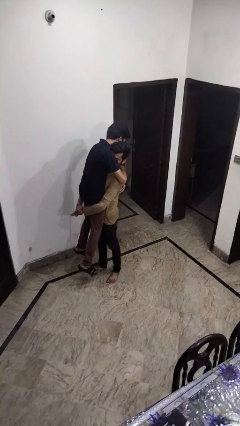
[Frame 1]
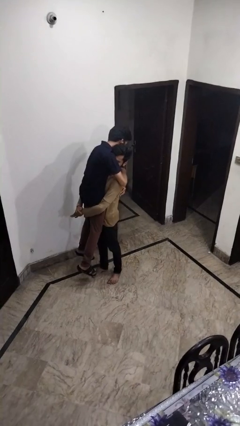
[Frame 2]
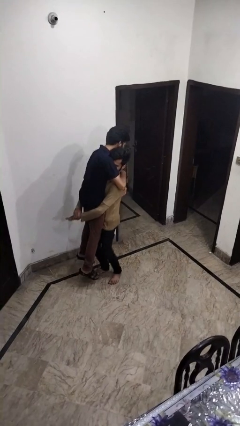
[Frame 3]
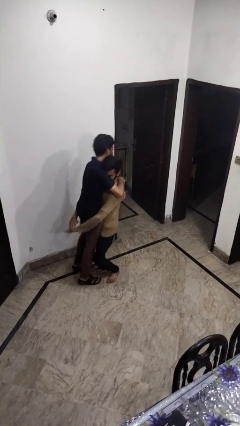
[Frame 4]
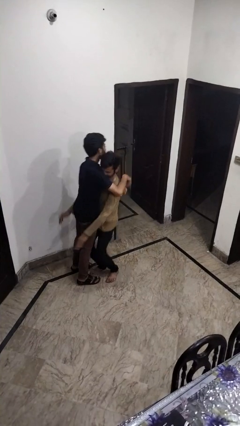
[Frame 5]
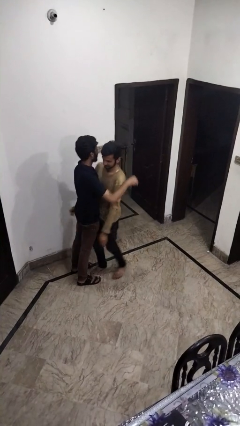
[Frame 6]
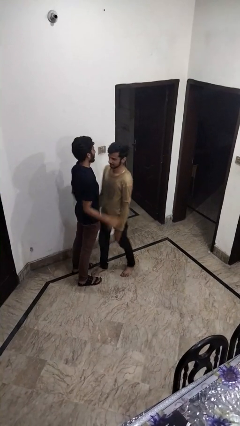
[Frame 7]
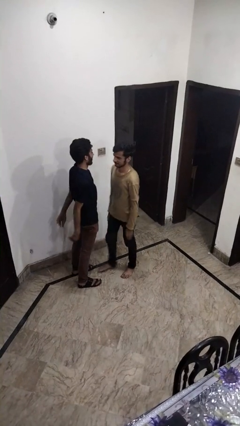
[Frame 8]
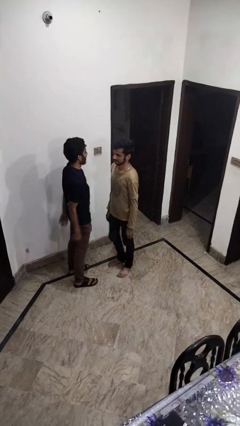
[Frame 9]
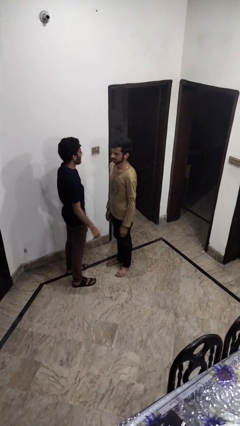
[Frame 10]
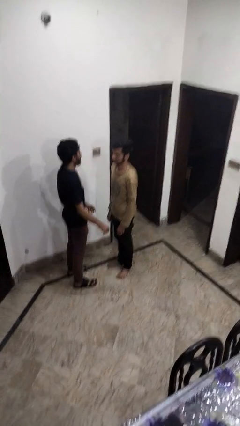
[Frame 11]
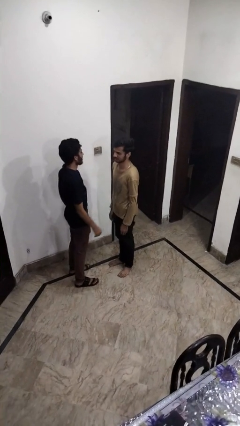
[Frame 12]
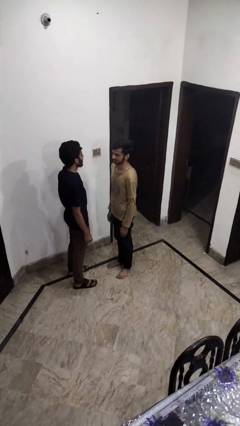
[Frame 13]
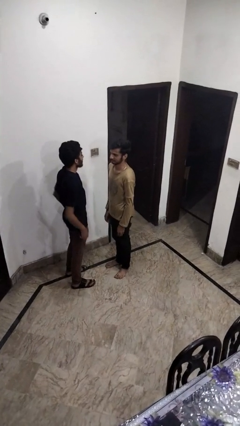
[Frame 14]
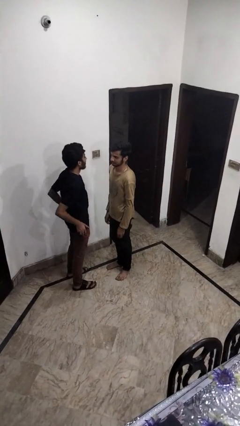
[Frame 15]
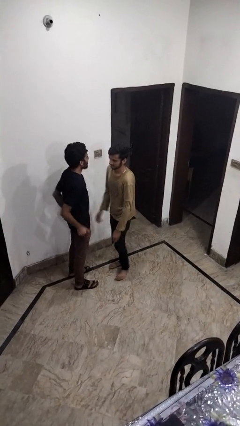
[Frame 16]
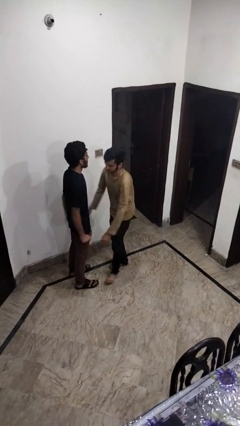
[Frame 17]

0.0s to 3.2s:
person puts down person

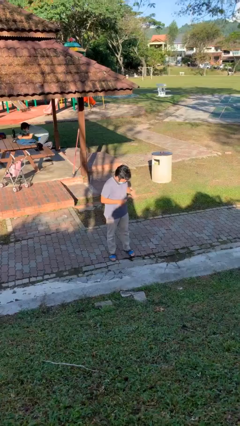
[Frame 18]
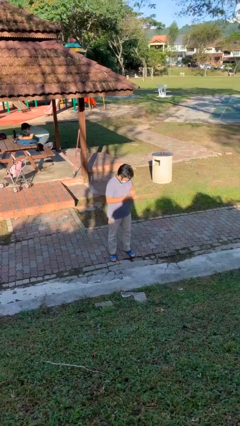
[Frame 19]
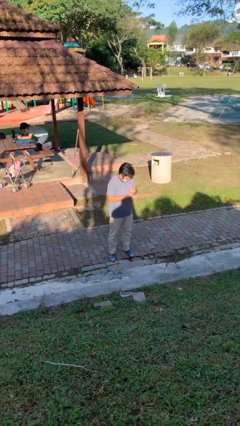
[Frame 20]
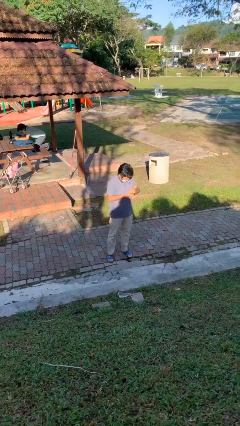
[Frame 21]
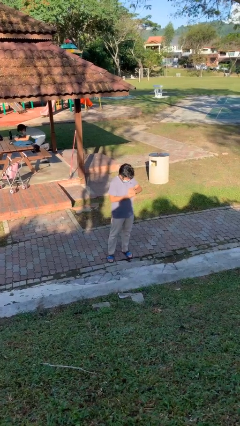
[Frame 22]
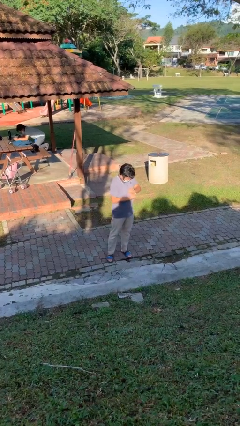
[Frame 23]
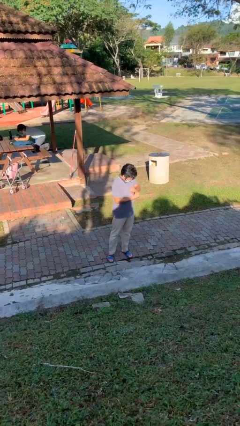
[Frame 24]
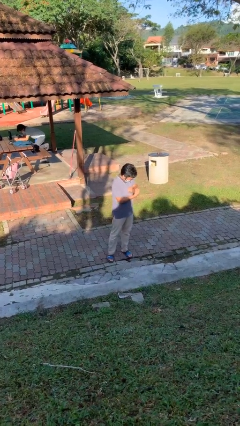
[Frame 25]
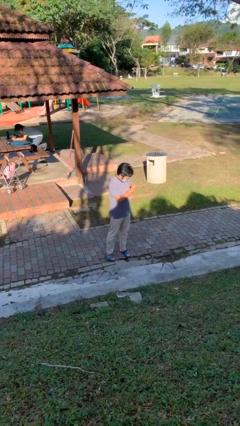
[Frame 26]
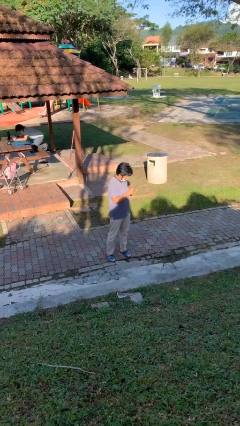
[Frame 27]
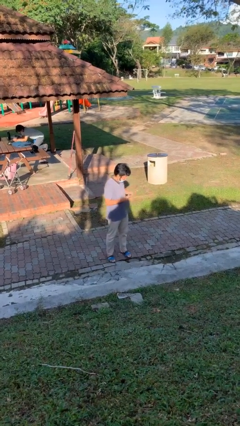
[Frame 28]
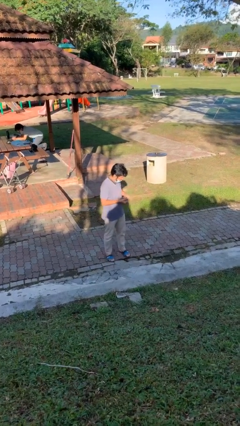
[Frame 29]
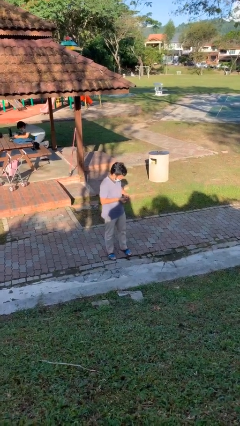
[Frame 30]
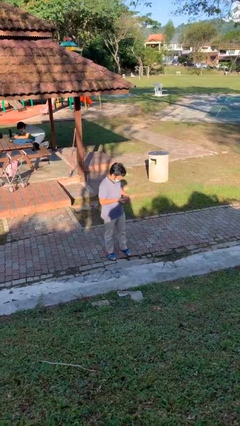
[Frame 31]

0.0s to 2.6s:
person takes off wristwatch

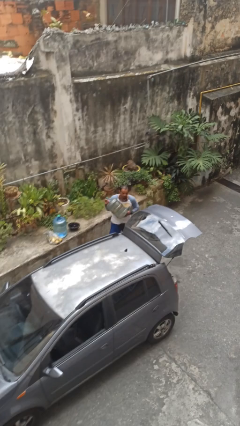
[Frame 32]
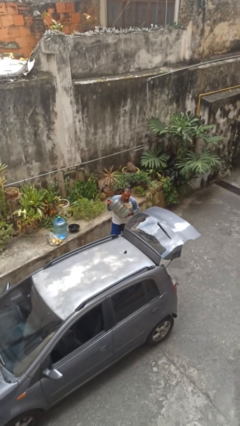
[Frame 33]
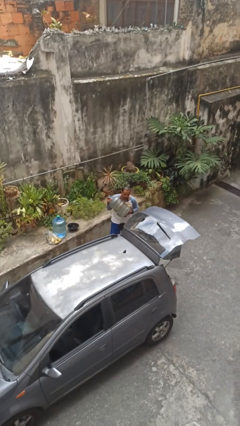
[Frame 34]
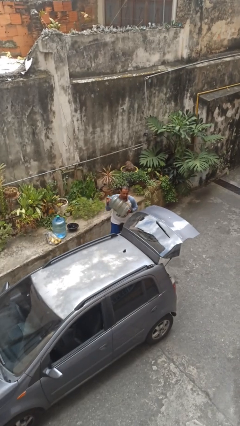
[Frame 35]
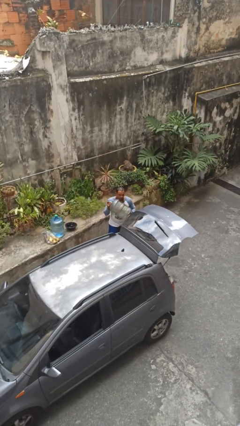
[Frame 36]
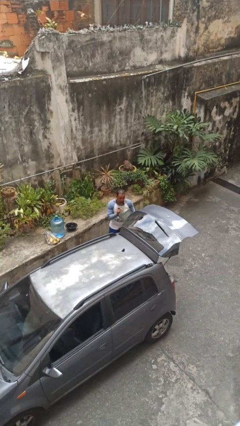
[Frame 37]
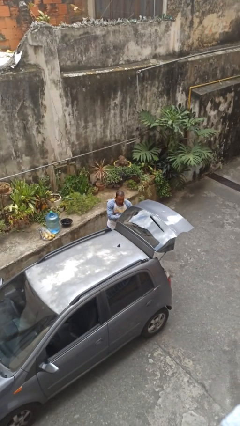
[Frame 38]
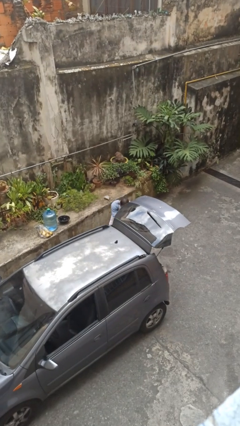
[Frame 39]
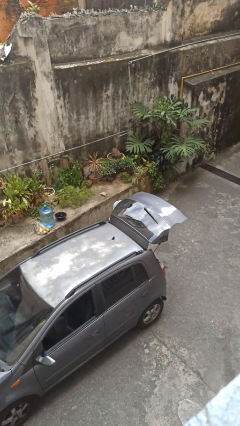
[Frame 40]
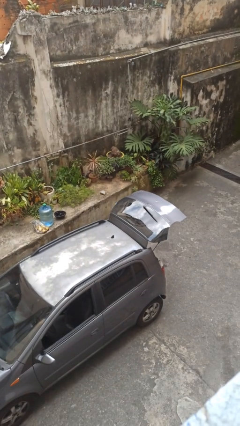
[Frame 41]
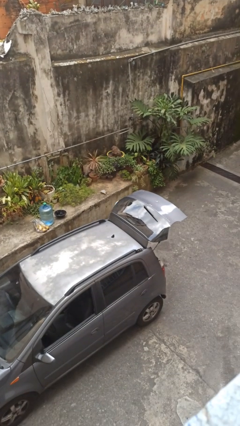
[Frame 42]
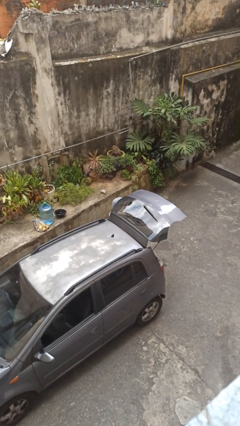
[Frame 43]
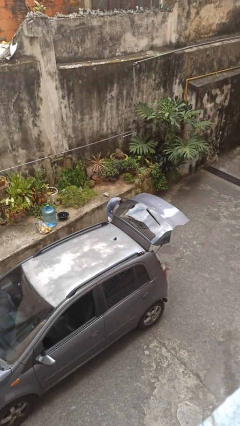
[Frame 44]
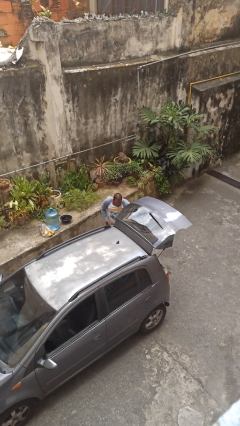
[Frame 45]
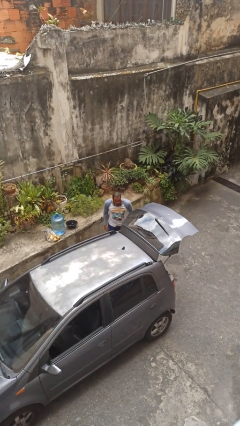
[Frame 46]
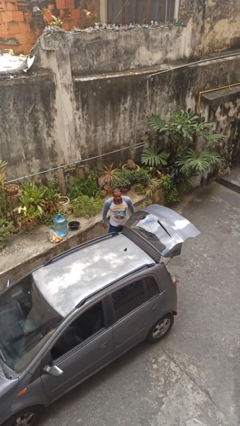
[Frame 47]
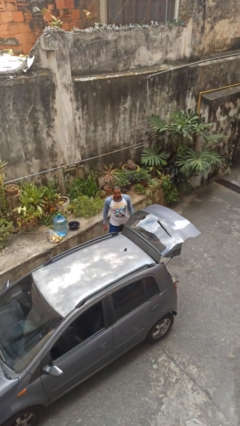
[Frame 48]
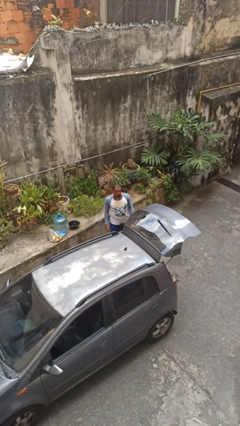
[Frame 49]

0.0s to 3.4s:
person loads car

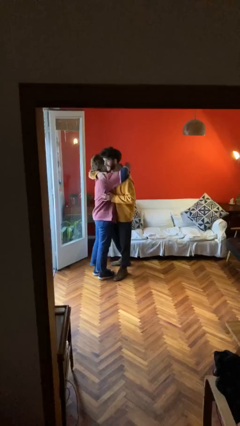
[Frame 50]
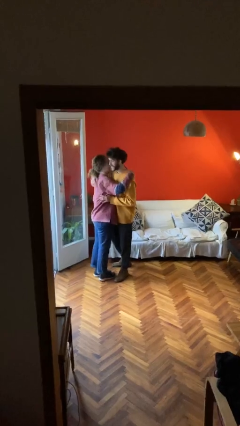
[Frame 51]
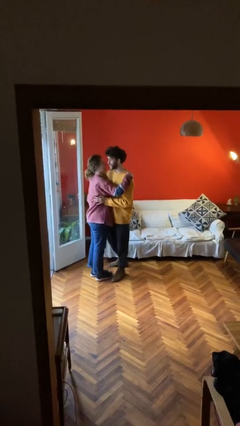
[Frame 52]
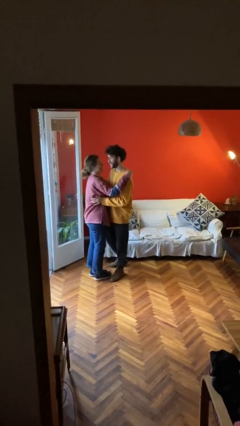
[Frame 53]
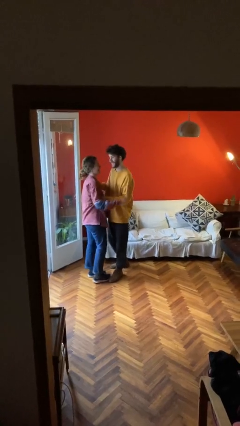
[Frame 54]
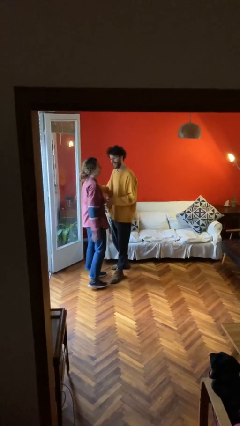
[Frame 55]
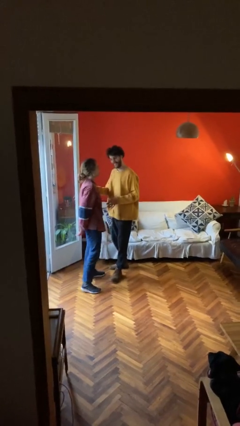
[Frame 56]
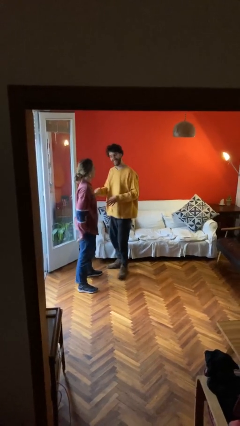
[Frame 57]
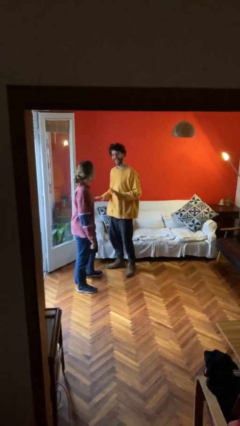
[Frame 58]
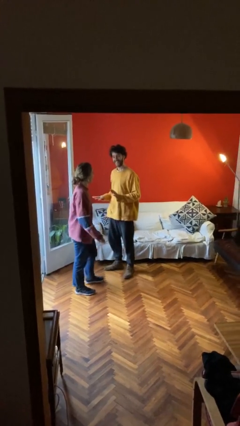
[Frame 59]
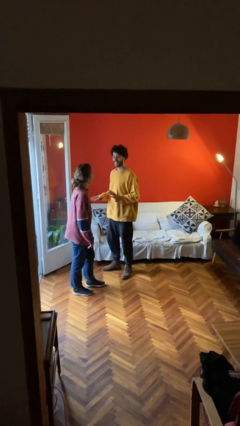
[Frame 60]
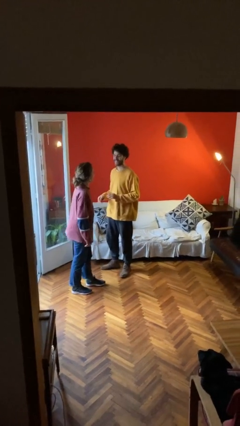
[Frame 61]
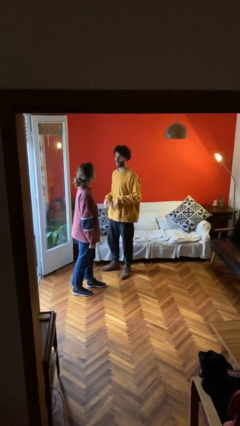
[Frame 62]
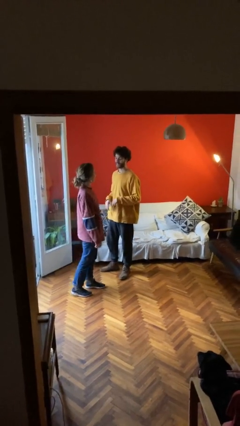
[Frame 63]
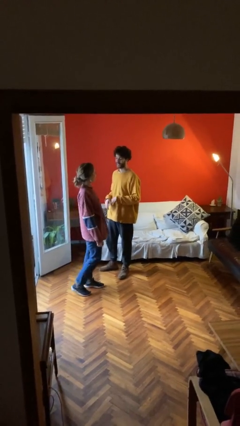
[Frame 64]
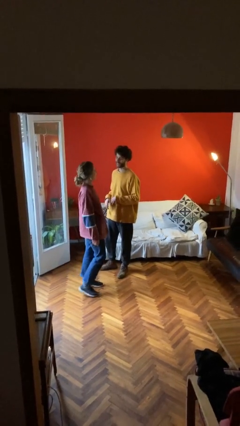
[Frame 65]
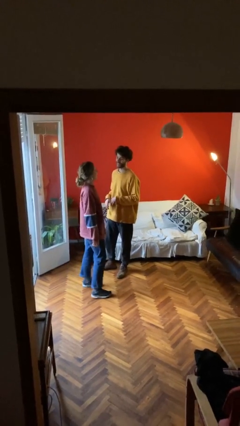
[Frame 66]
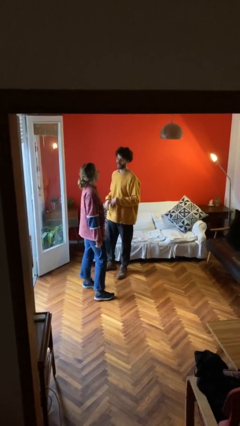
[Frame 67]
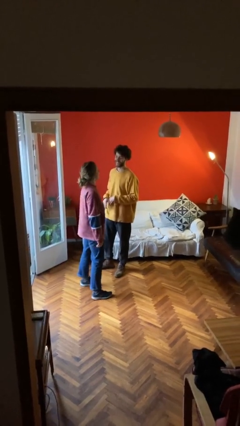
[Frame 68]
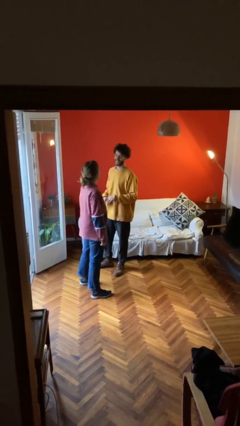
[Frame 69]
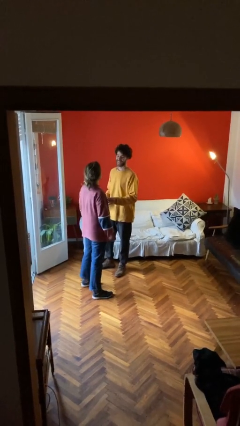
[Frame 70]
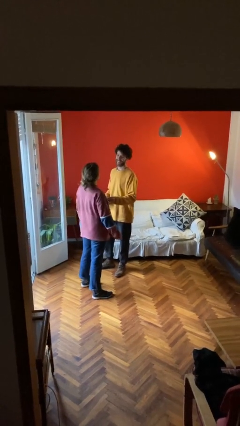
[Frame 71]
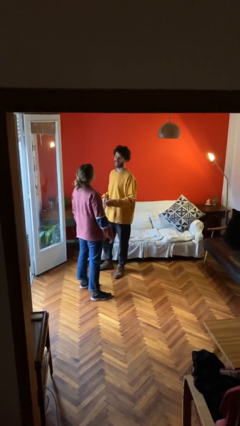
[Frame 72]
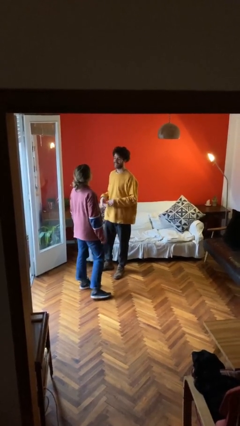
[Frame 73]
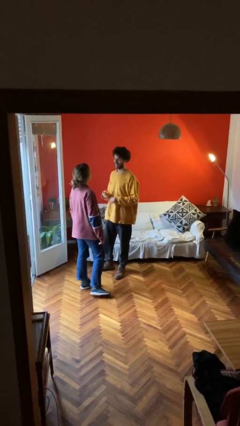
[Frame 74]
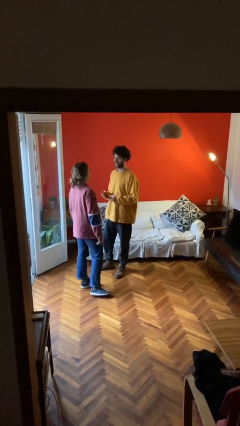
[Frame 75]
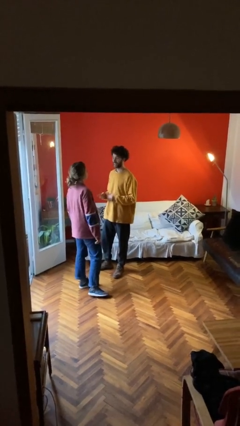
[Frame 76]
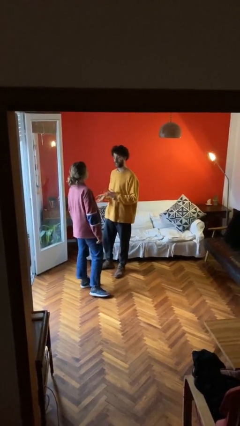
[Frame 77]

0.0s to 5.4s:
person talks to person

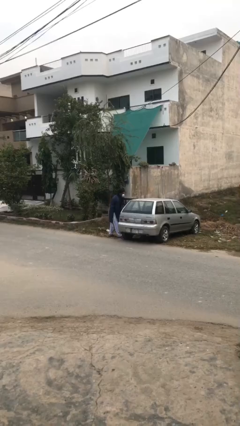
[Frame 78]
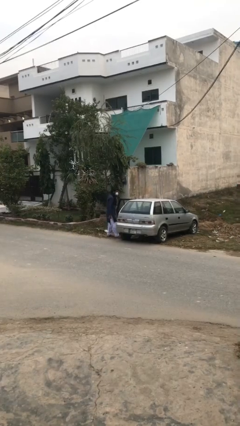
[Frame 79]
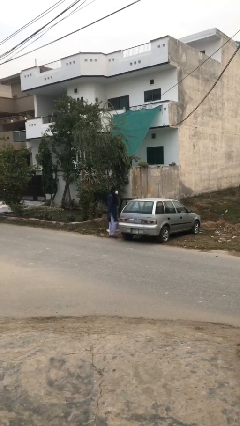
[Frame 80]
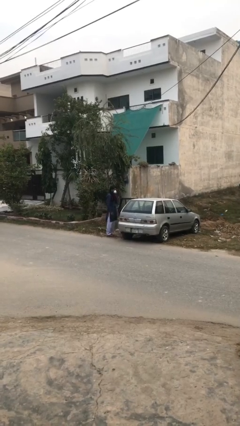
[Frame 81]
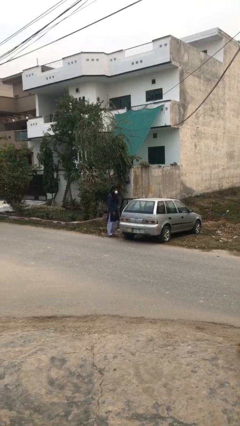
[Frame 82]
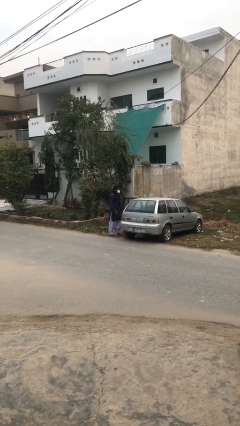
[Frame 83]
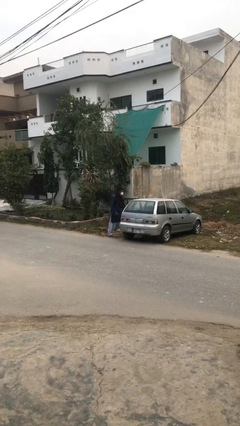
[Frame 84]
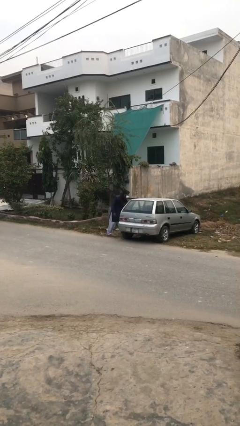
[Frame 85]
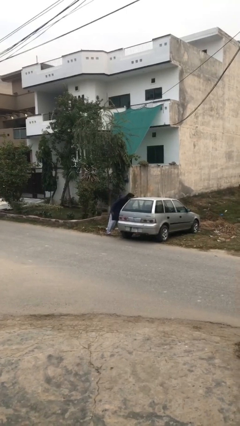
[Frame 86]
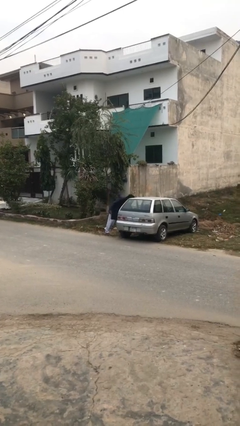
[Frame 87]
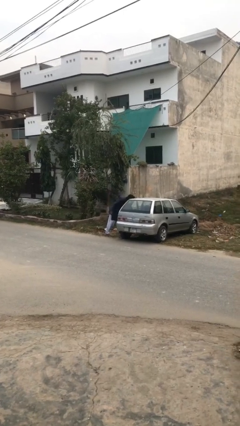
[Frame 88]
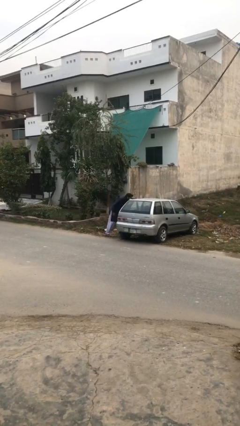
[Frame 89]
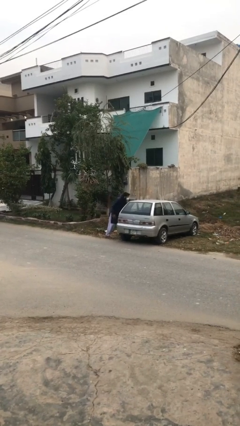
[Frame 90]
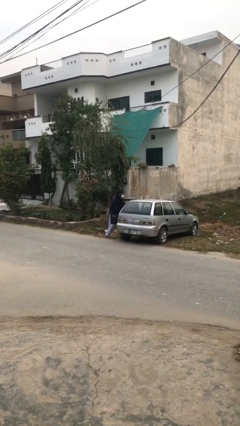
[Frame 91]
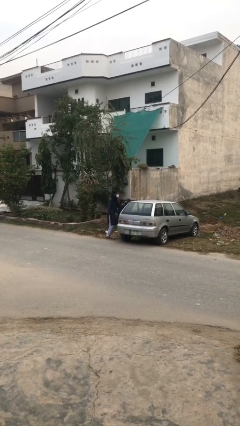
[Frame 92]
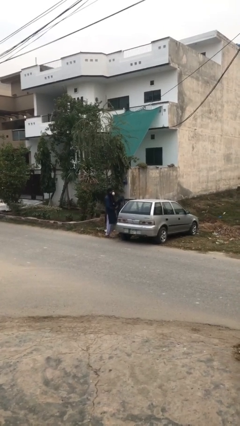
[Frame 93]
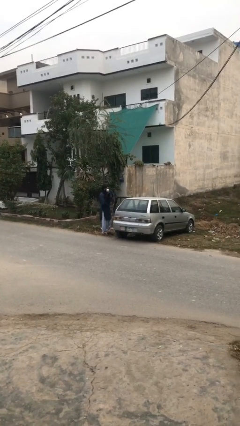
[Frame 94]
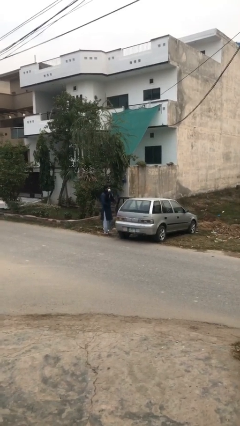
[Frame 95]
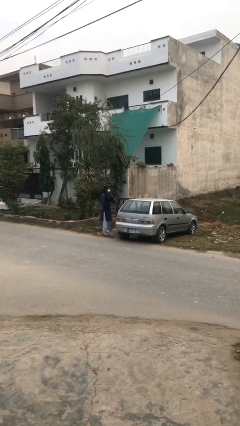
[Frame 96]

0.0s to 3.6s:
person unloads car
